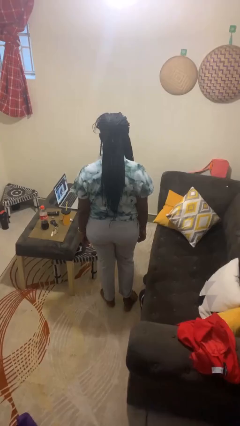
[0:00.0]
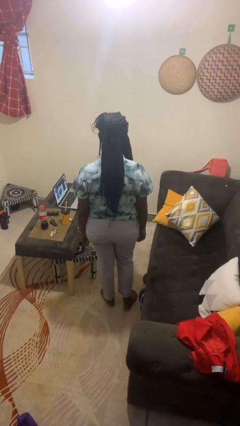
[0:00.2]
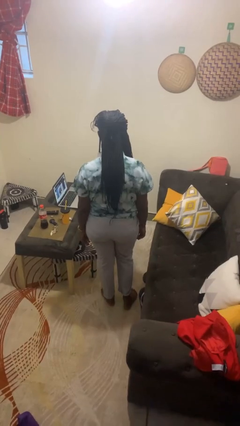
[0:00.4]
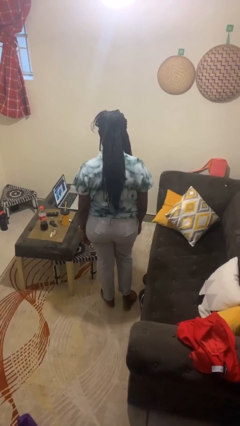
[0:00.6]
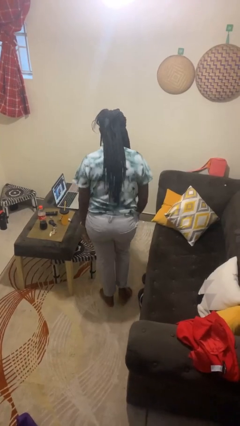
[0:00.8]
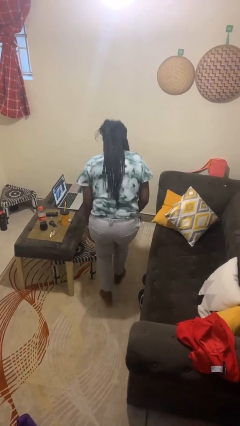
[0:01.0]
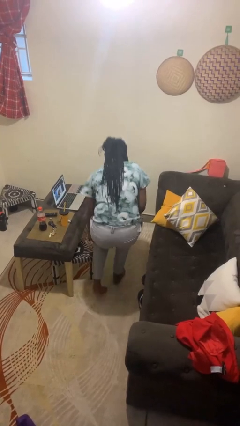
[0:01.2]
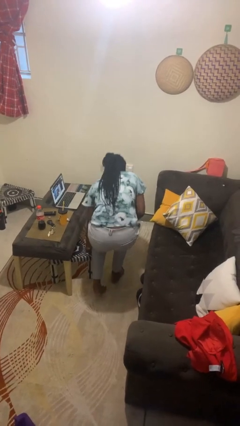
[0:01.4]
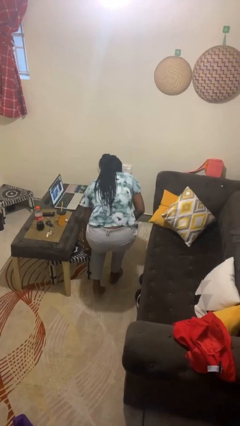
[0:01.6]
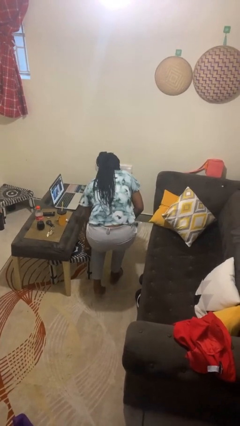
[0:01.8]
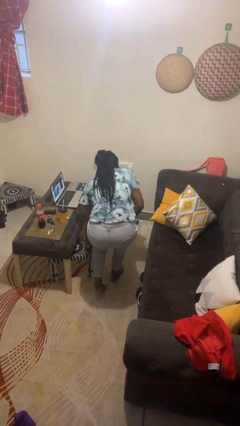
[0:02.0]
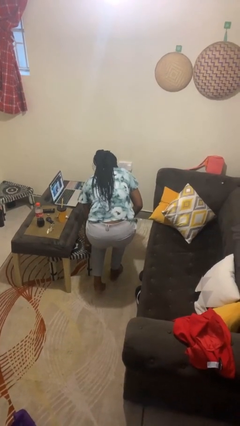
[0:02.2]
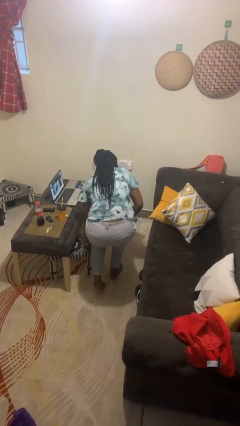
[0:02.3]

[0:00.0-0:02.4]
person trips on object on floor

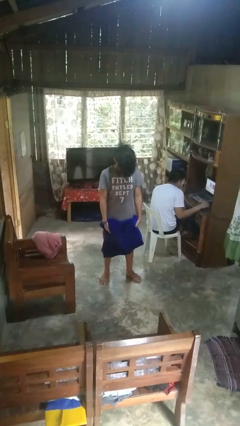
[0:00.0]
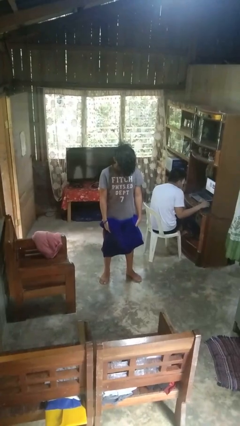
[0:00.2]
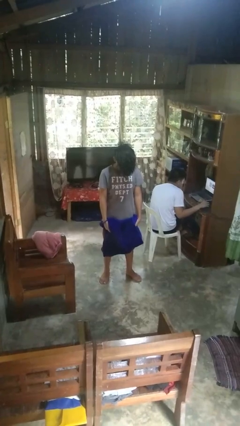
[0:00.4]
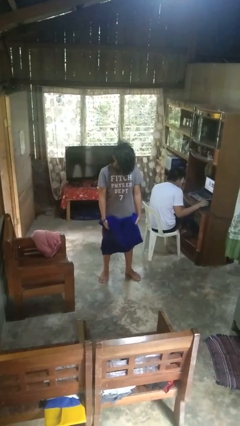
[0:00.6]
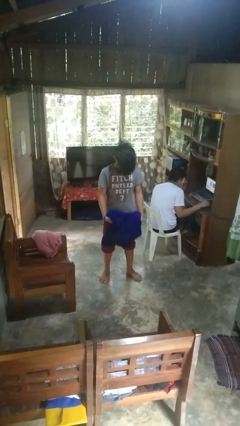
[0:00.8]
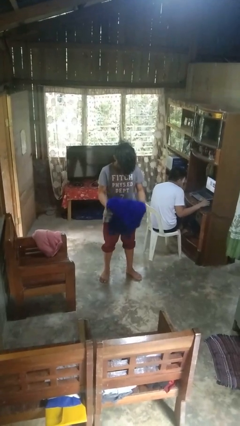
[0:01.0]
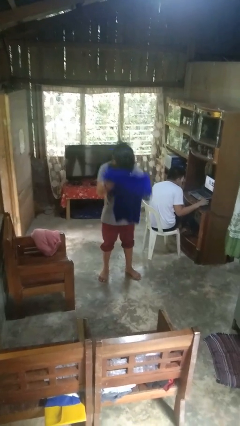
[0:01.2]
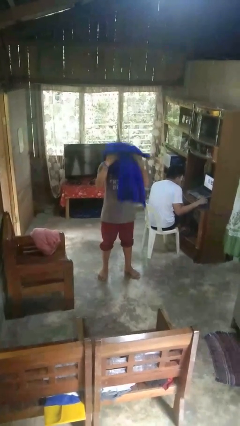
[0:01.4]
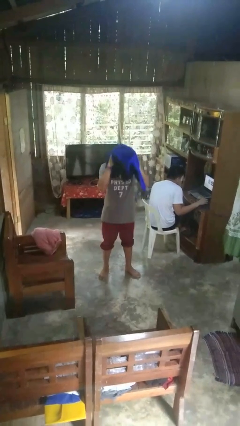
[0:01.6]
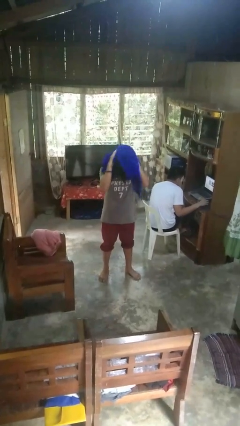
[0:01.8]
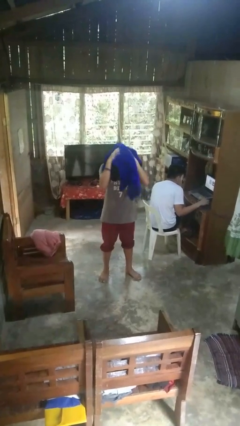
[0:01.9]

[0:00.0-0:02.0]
person dries hair with towel

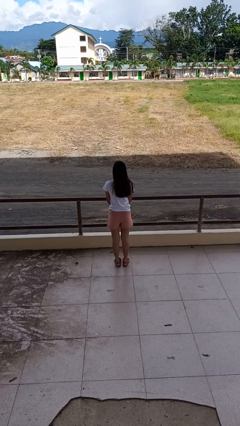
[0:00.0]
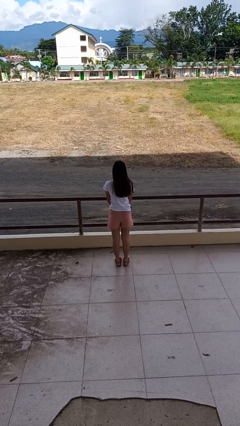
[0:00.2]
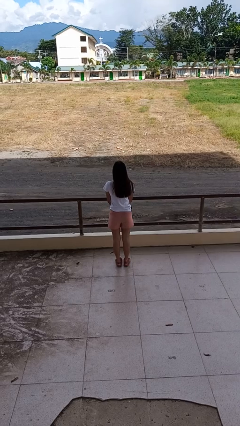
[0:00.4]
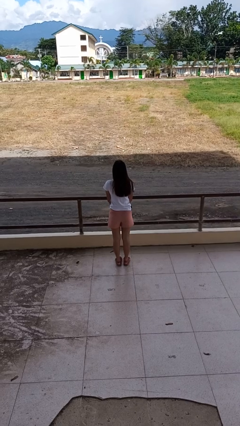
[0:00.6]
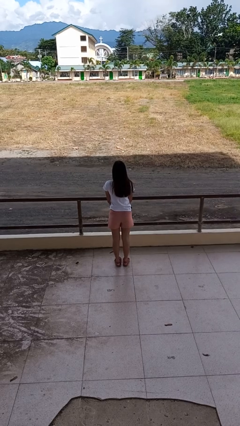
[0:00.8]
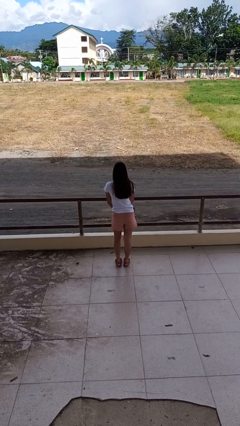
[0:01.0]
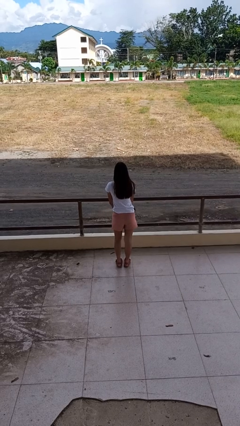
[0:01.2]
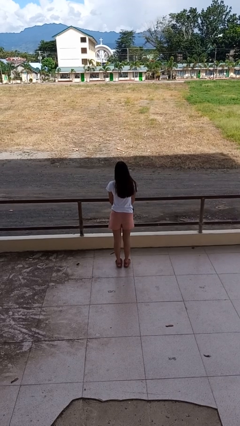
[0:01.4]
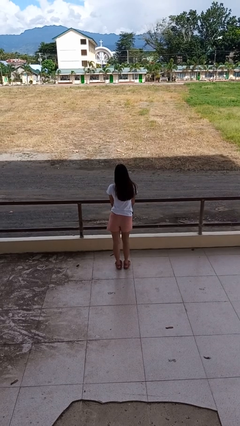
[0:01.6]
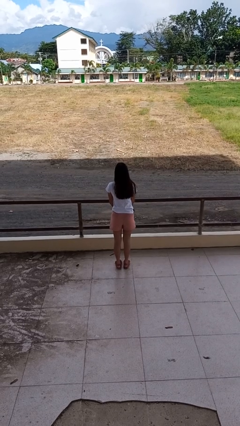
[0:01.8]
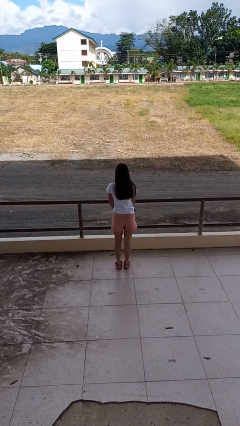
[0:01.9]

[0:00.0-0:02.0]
person wiggles hips

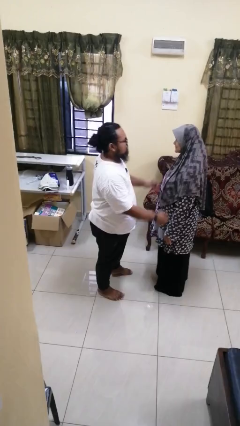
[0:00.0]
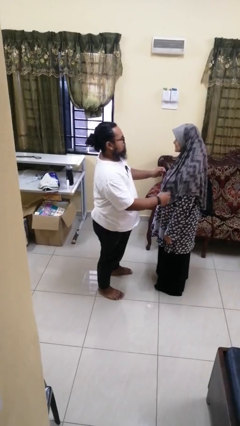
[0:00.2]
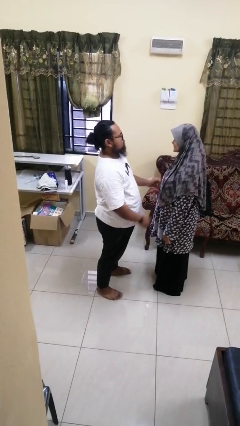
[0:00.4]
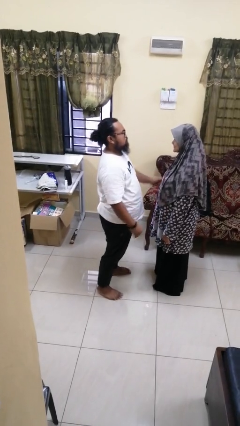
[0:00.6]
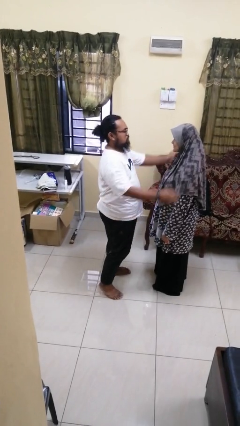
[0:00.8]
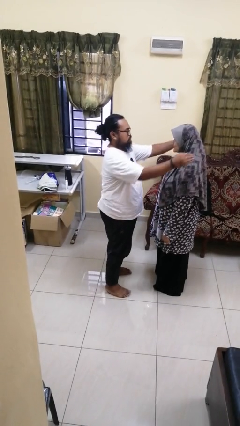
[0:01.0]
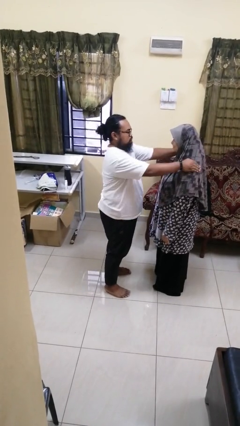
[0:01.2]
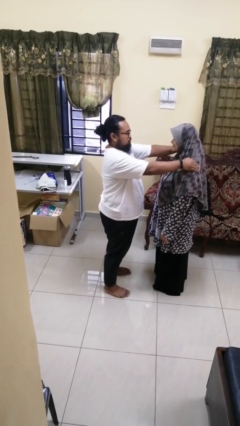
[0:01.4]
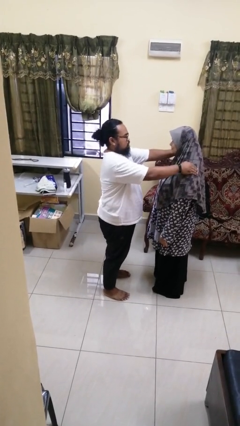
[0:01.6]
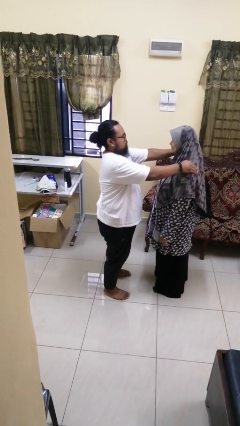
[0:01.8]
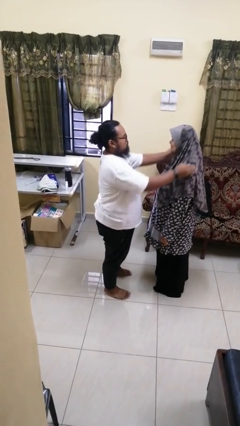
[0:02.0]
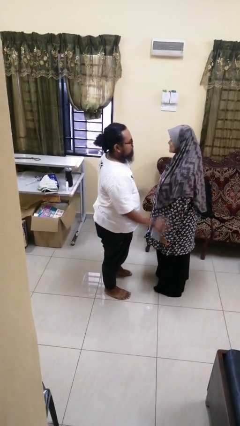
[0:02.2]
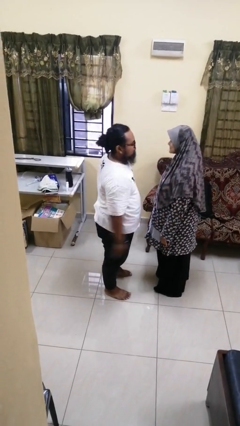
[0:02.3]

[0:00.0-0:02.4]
person pounds shoulders of person

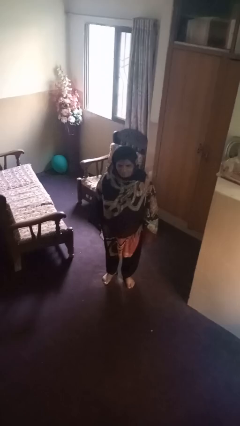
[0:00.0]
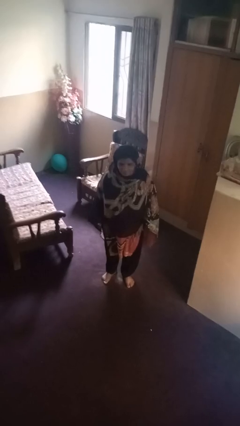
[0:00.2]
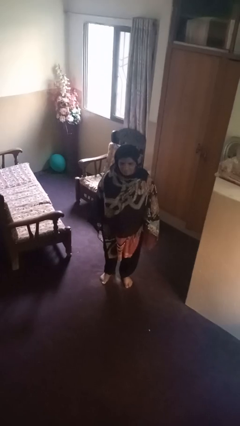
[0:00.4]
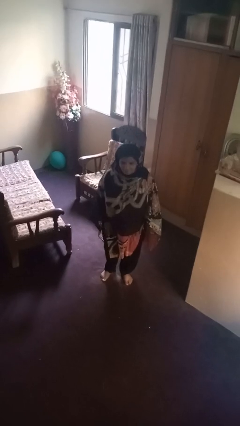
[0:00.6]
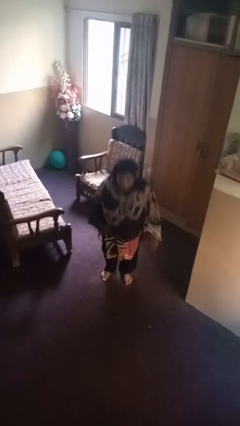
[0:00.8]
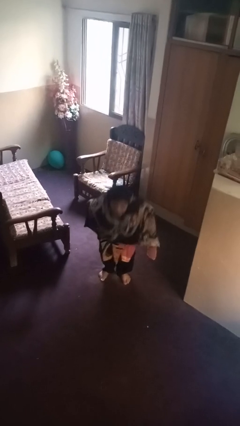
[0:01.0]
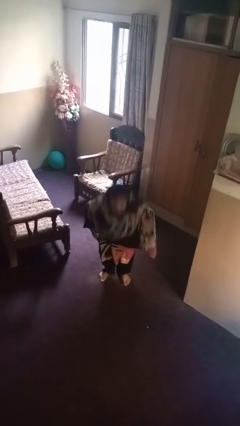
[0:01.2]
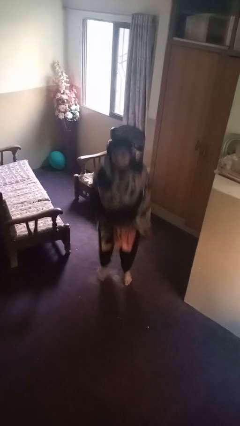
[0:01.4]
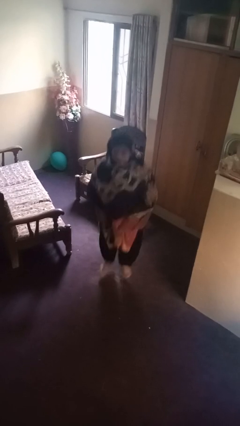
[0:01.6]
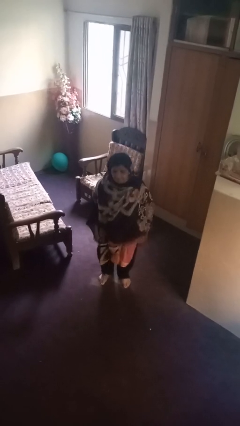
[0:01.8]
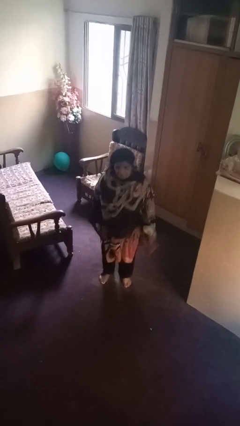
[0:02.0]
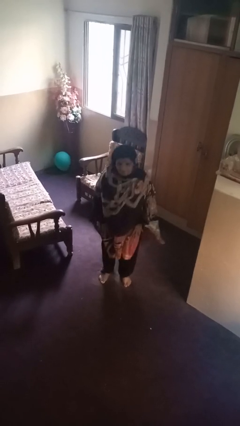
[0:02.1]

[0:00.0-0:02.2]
person jumps

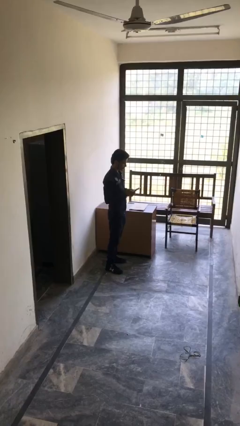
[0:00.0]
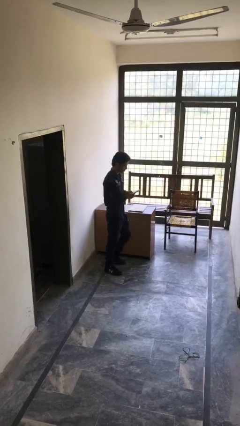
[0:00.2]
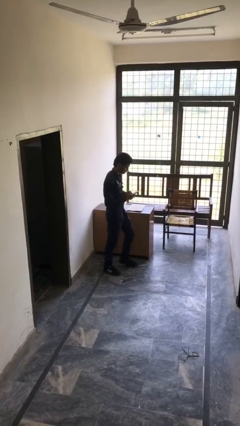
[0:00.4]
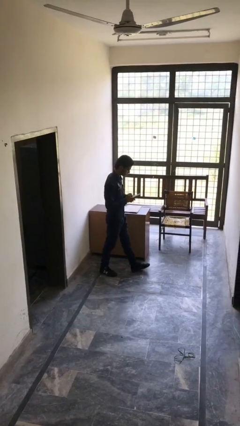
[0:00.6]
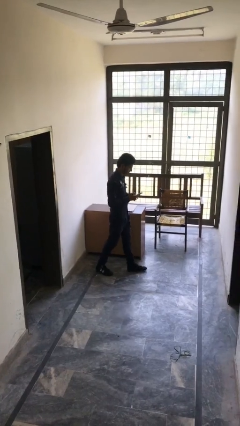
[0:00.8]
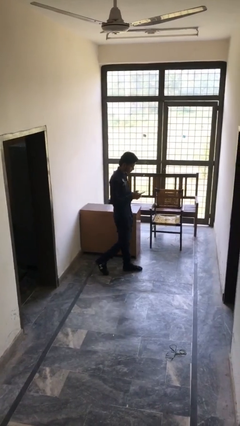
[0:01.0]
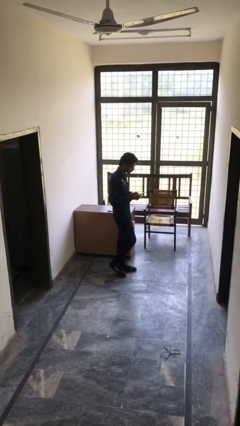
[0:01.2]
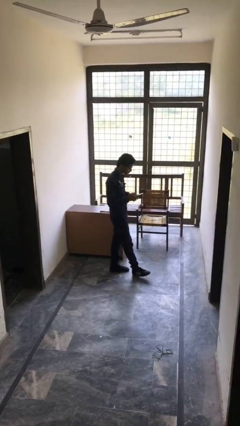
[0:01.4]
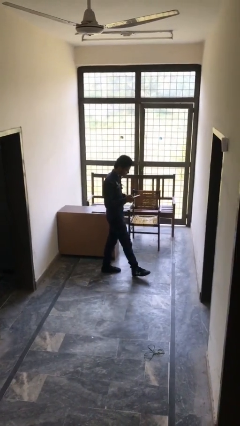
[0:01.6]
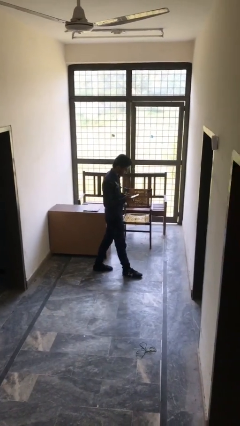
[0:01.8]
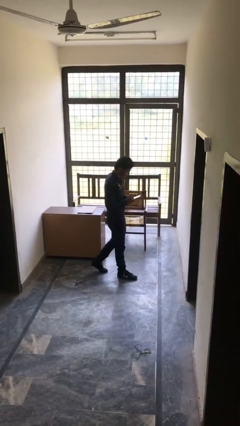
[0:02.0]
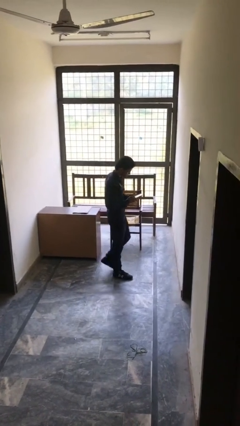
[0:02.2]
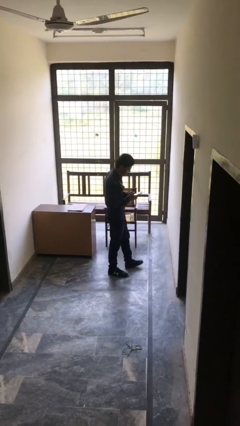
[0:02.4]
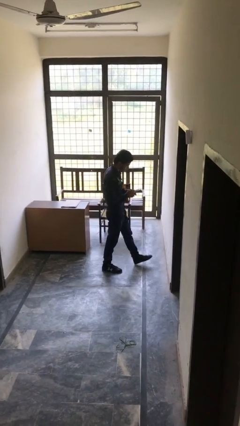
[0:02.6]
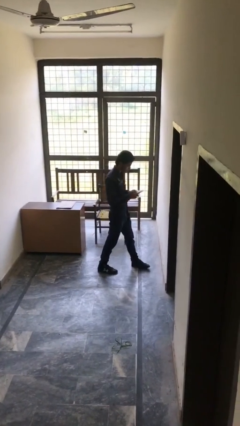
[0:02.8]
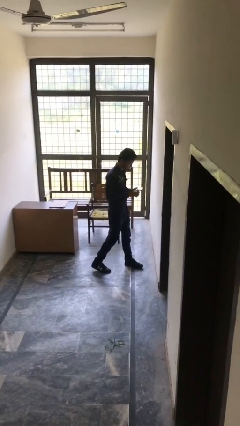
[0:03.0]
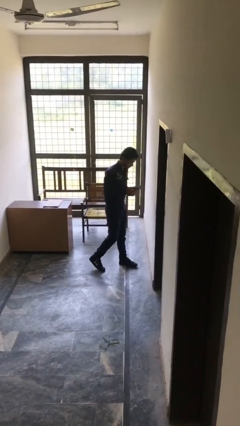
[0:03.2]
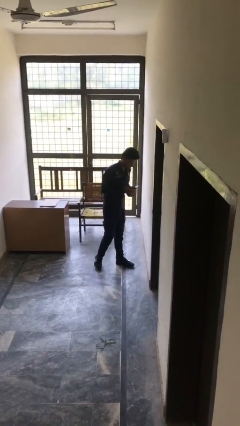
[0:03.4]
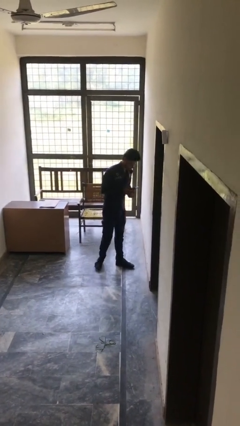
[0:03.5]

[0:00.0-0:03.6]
person texts on phone

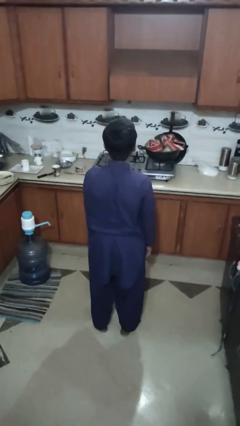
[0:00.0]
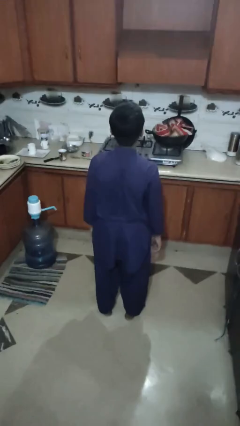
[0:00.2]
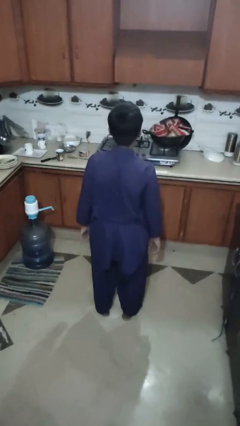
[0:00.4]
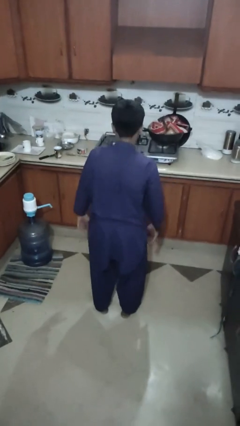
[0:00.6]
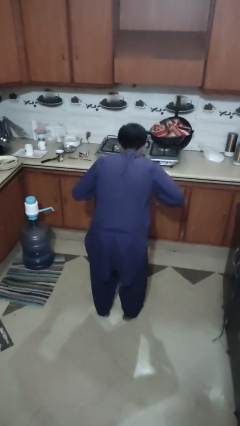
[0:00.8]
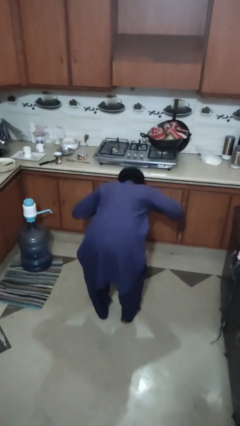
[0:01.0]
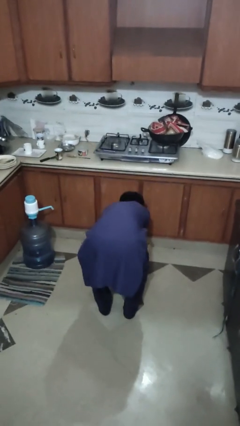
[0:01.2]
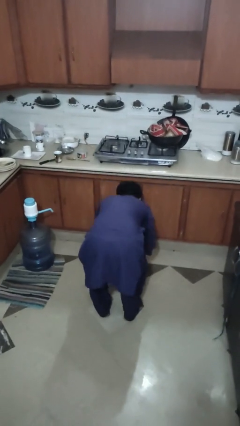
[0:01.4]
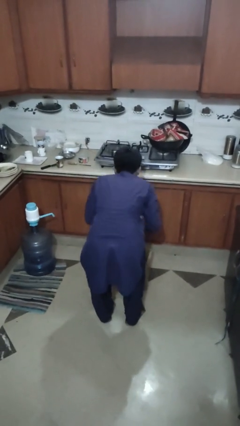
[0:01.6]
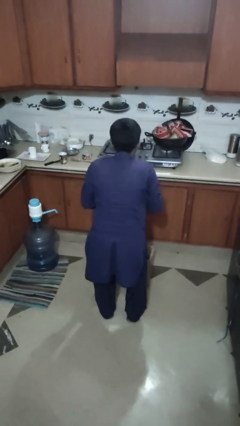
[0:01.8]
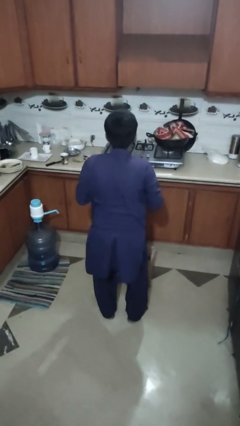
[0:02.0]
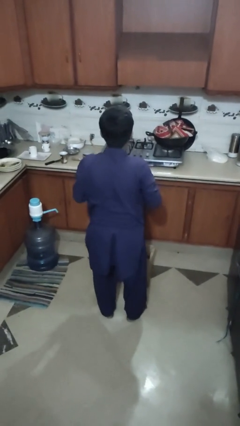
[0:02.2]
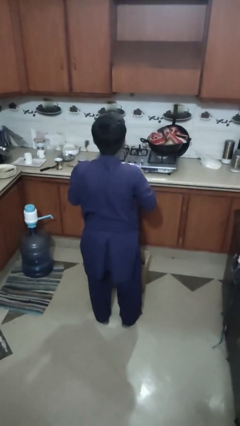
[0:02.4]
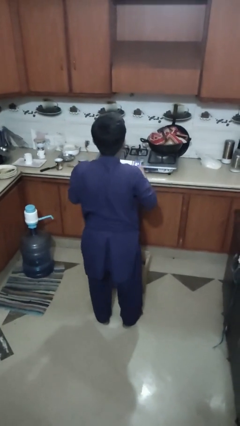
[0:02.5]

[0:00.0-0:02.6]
person takes object from box

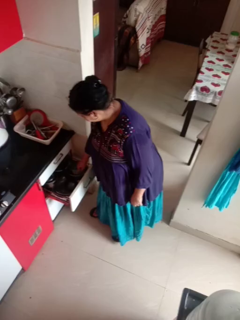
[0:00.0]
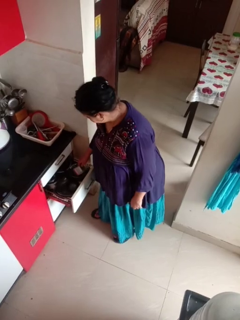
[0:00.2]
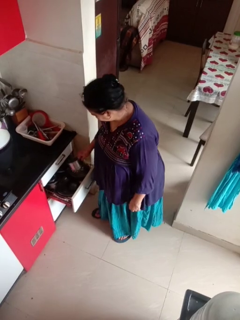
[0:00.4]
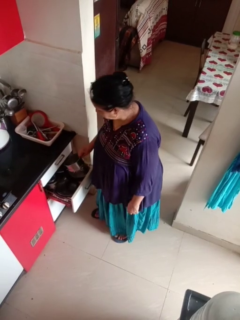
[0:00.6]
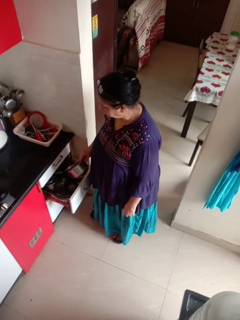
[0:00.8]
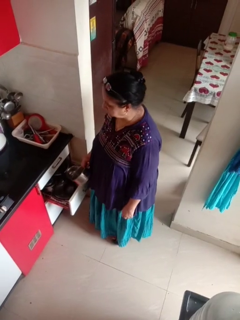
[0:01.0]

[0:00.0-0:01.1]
person takes object from kitchen drawer
